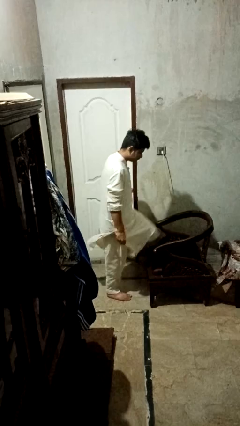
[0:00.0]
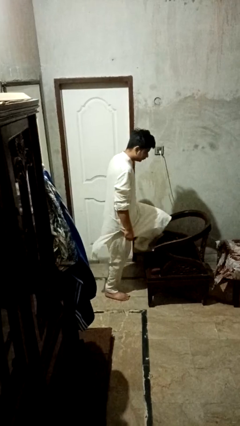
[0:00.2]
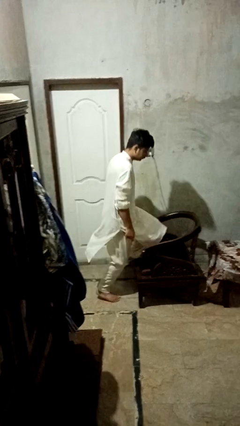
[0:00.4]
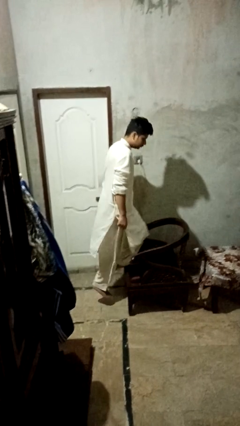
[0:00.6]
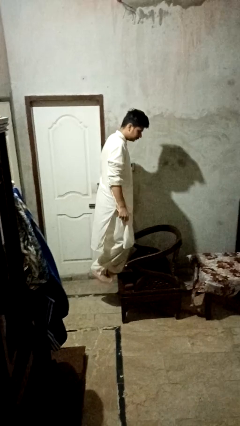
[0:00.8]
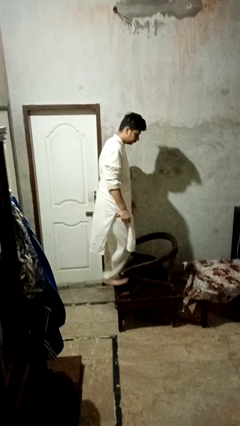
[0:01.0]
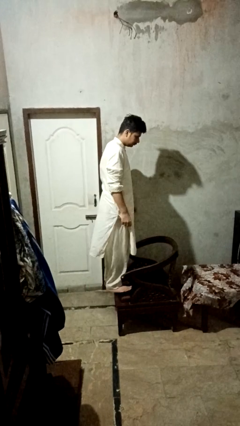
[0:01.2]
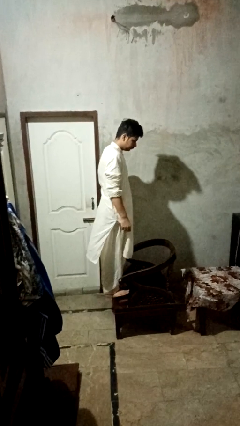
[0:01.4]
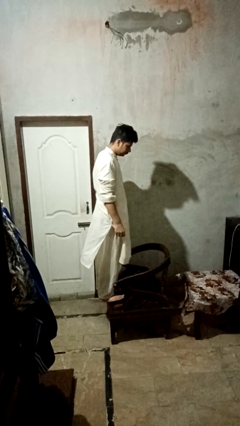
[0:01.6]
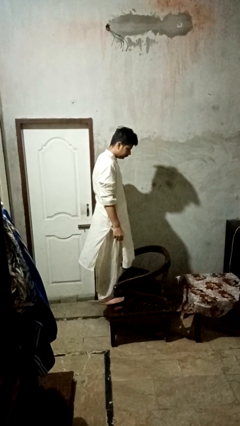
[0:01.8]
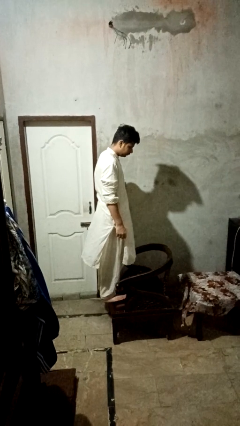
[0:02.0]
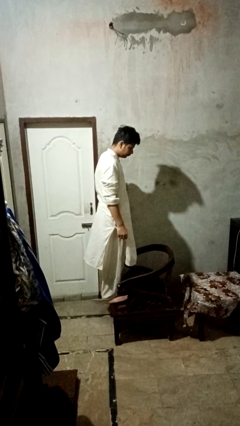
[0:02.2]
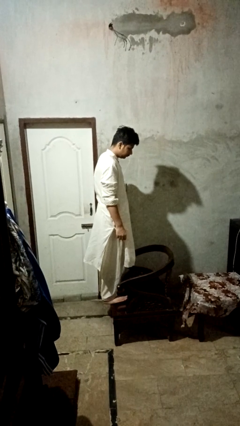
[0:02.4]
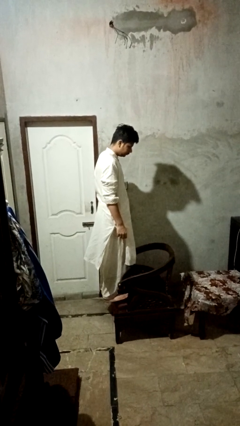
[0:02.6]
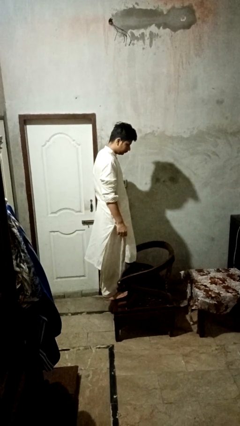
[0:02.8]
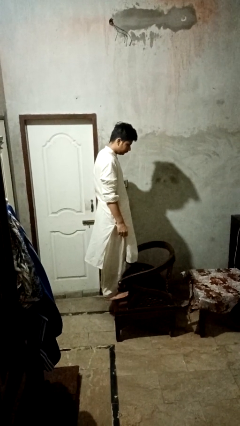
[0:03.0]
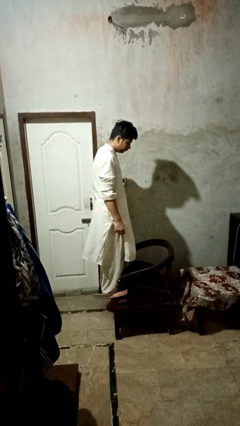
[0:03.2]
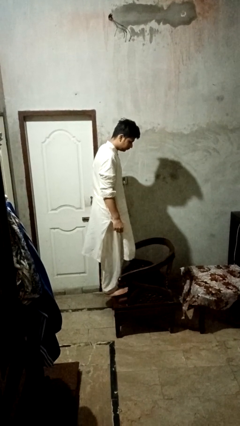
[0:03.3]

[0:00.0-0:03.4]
person climbs on couch

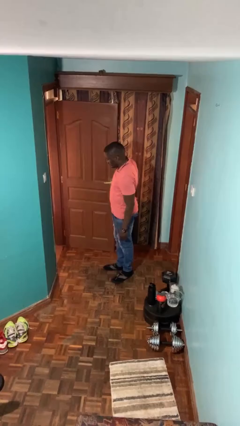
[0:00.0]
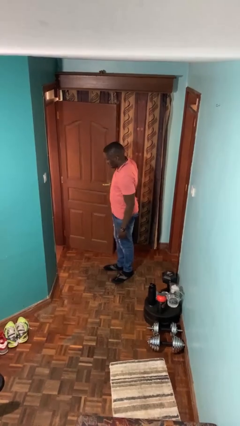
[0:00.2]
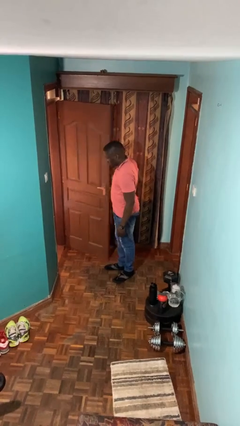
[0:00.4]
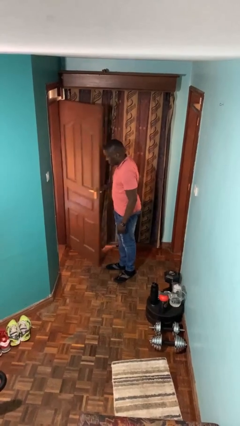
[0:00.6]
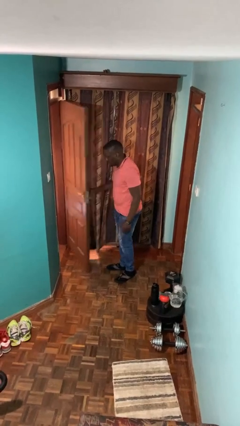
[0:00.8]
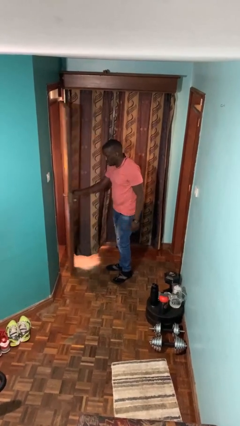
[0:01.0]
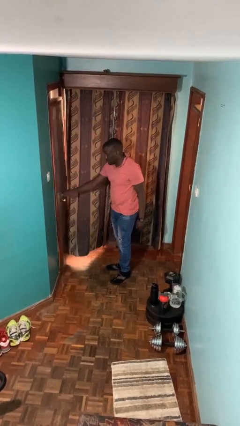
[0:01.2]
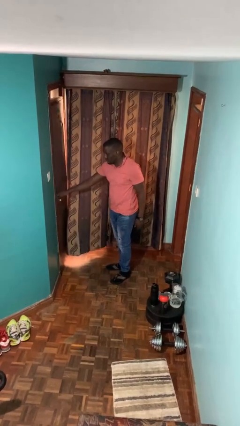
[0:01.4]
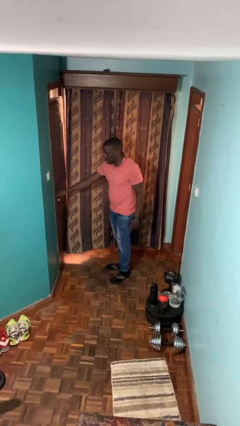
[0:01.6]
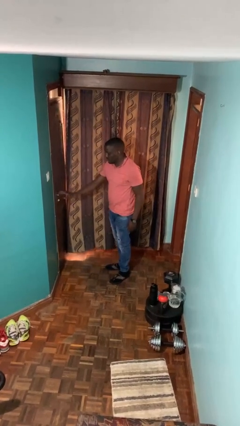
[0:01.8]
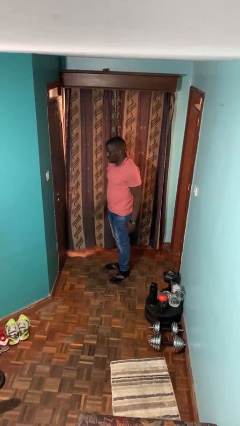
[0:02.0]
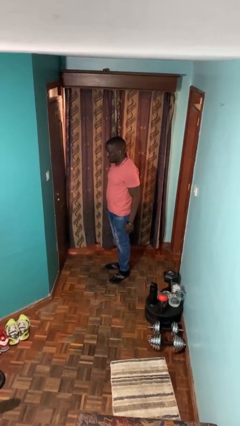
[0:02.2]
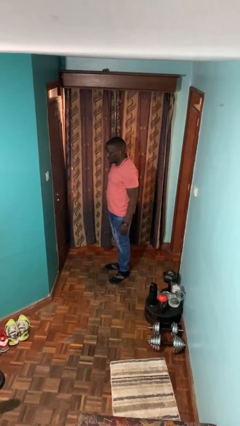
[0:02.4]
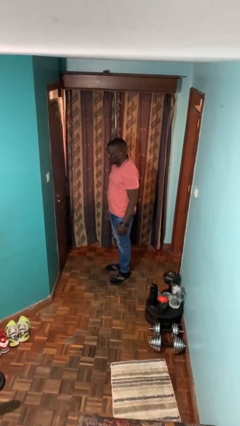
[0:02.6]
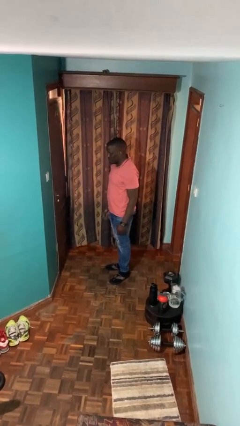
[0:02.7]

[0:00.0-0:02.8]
person closes facility door

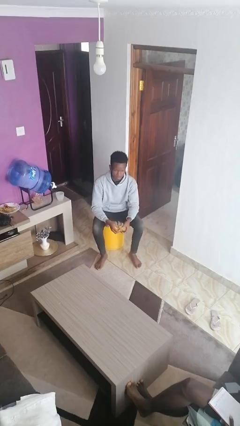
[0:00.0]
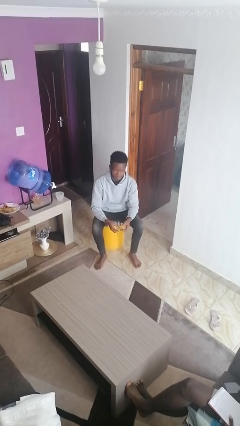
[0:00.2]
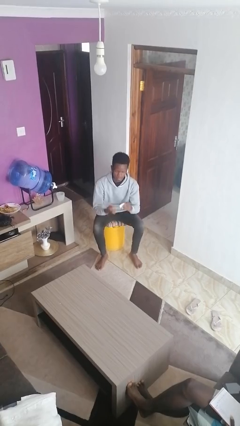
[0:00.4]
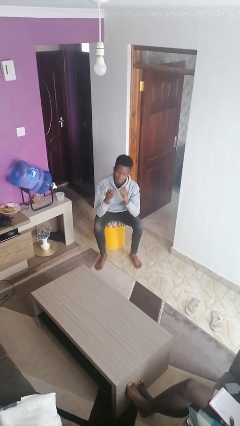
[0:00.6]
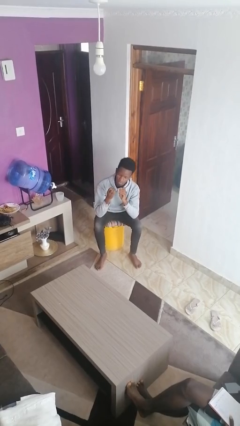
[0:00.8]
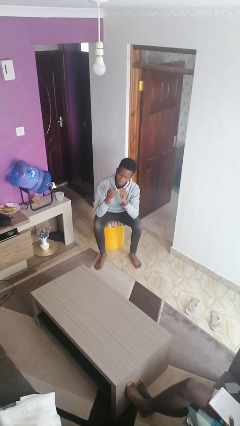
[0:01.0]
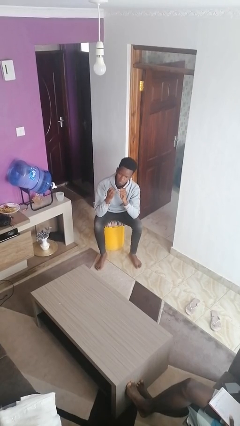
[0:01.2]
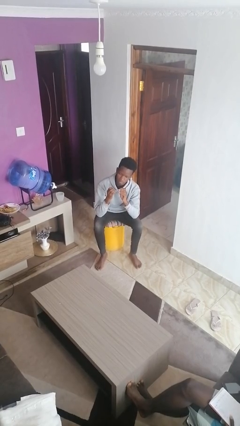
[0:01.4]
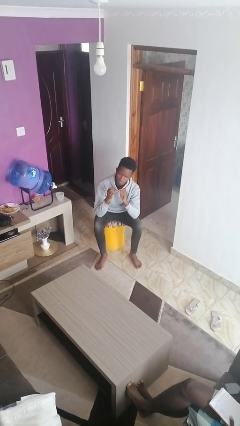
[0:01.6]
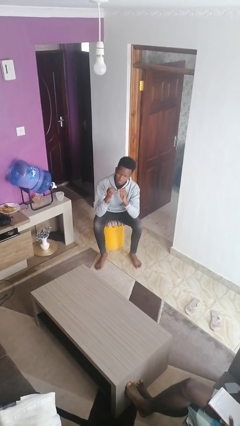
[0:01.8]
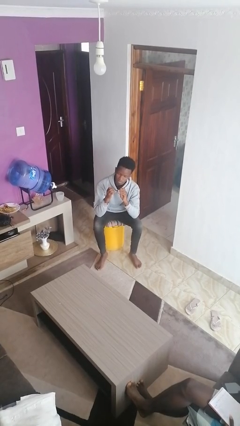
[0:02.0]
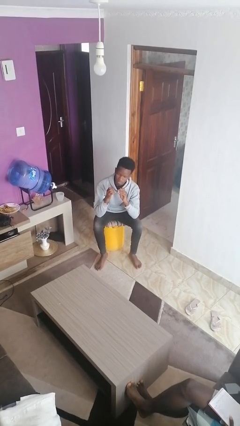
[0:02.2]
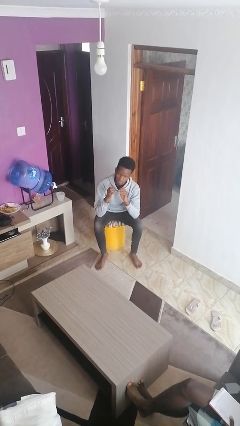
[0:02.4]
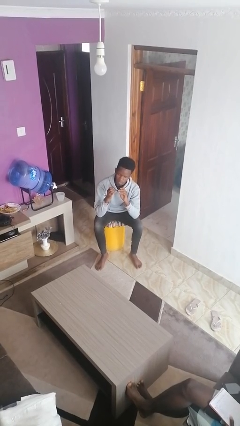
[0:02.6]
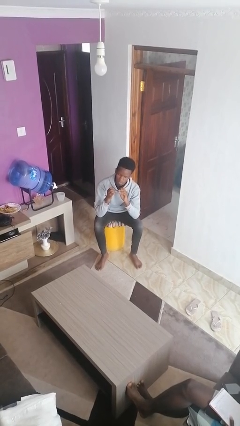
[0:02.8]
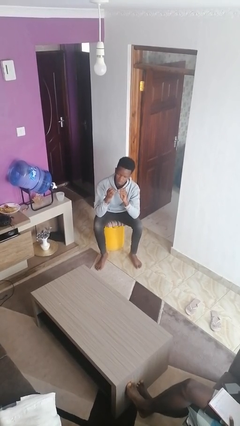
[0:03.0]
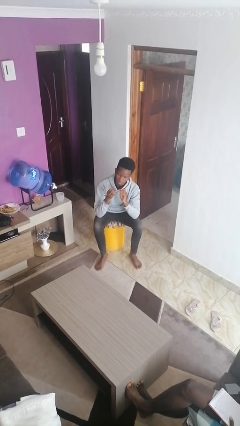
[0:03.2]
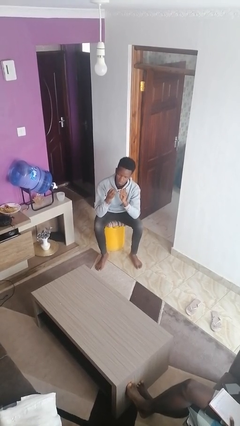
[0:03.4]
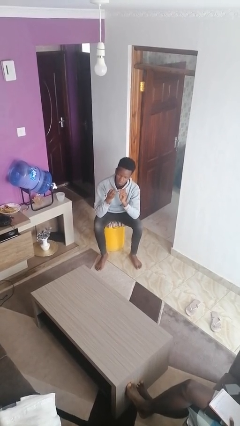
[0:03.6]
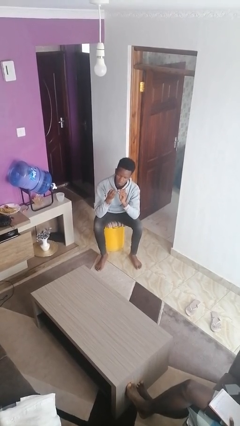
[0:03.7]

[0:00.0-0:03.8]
person clips fingernails

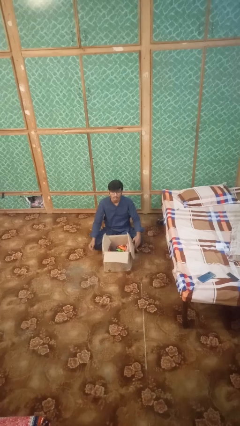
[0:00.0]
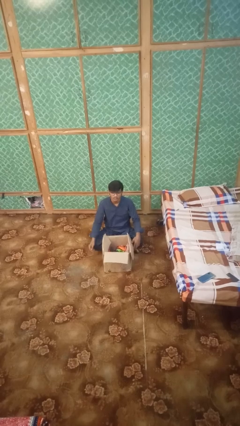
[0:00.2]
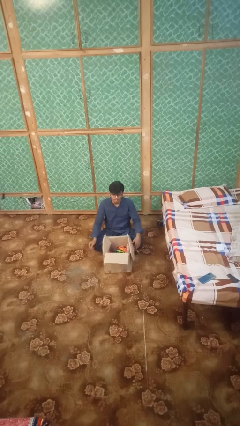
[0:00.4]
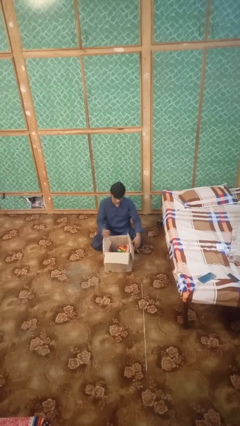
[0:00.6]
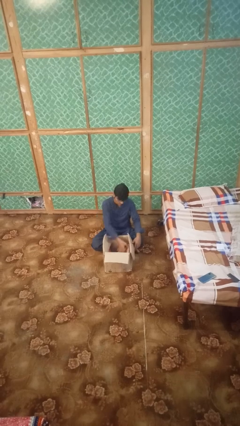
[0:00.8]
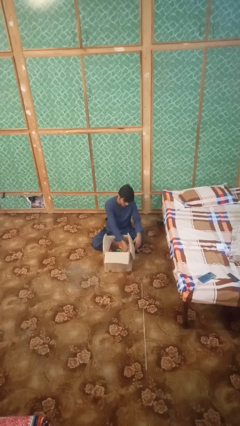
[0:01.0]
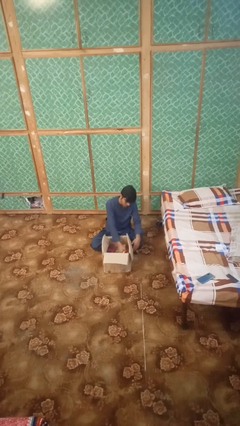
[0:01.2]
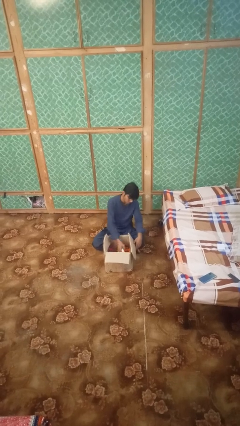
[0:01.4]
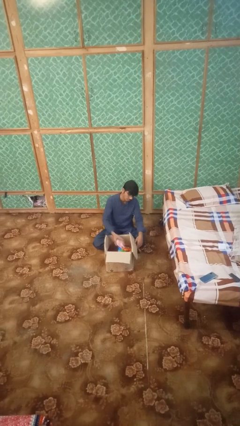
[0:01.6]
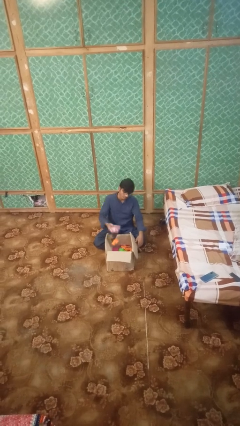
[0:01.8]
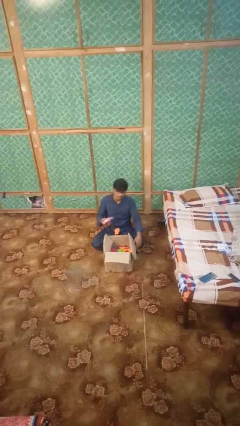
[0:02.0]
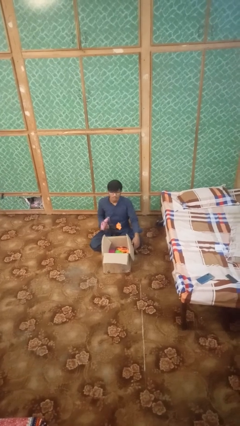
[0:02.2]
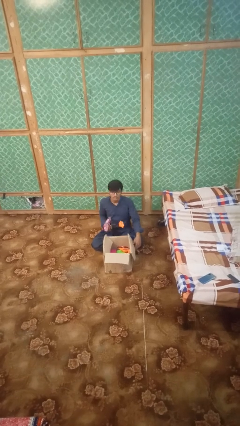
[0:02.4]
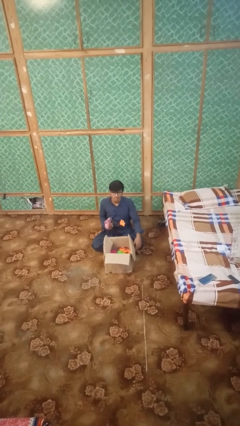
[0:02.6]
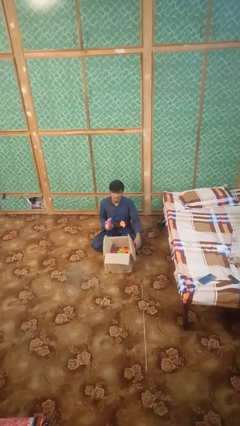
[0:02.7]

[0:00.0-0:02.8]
person takes object from box

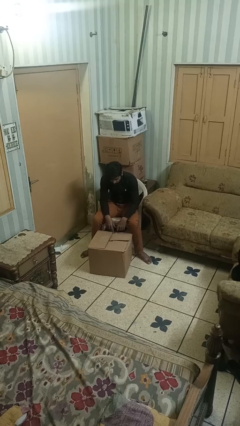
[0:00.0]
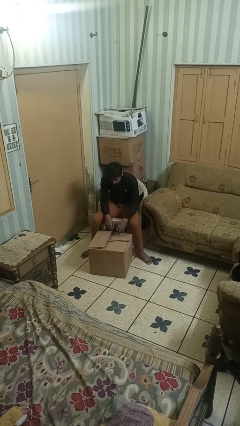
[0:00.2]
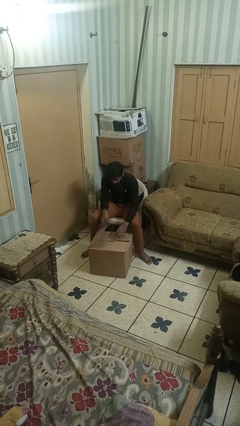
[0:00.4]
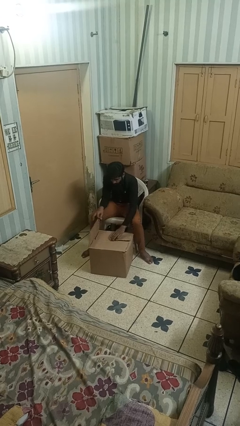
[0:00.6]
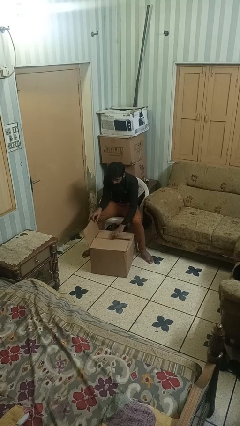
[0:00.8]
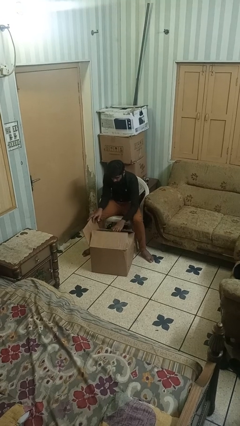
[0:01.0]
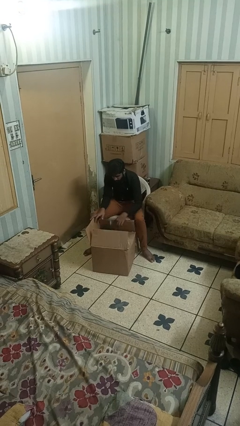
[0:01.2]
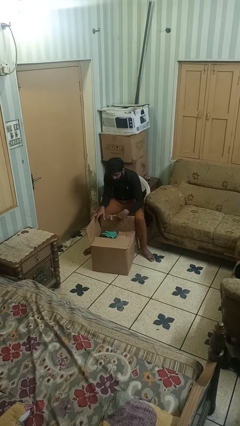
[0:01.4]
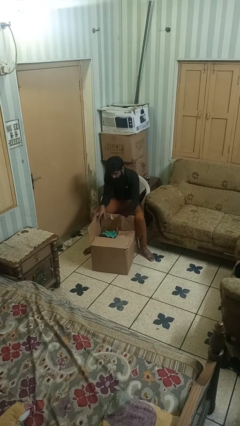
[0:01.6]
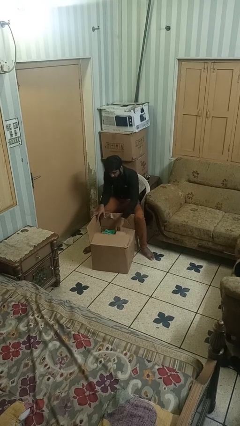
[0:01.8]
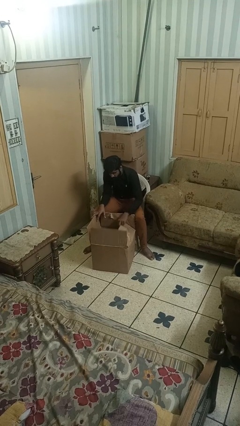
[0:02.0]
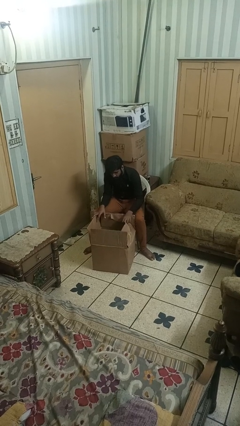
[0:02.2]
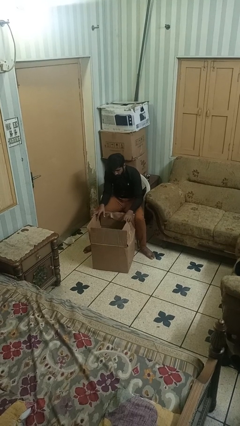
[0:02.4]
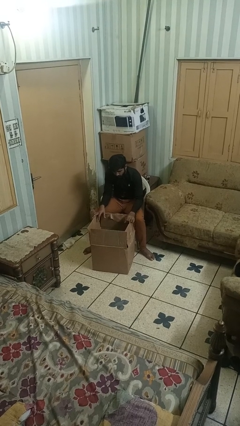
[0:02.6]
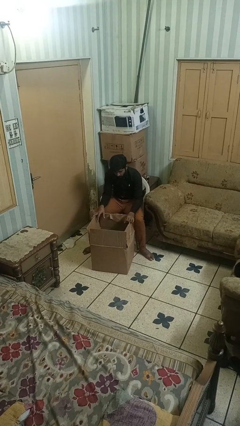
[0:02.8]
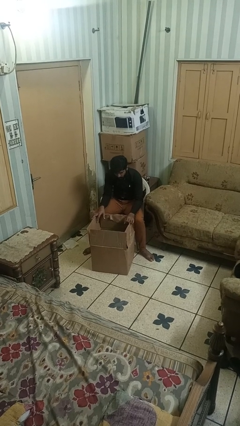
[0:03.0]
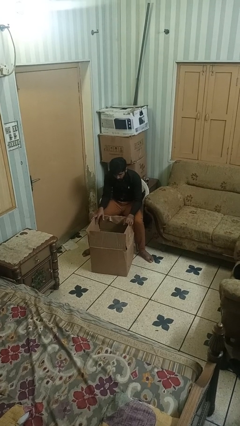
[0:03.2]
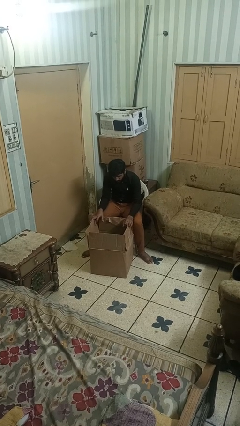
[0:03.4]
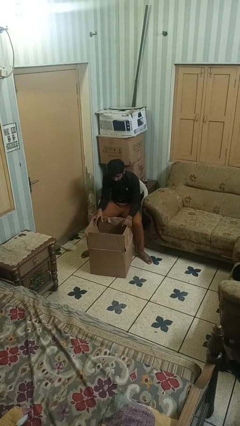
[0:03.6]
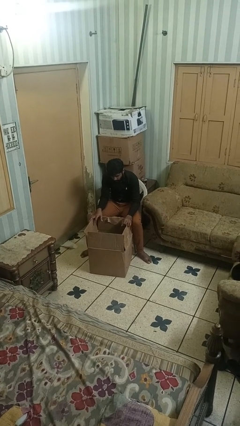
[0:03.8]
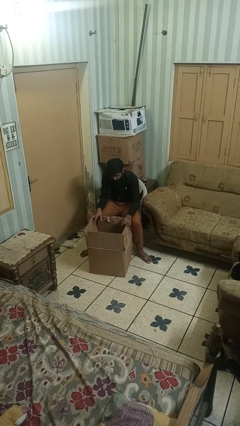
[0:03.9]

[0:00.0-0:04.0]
person opens box

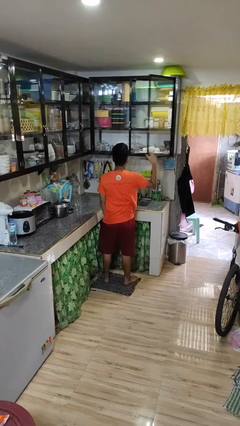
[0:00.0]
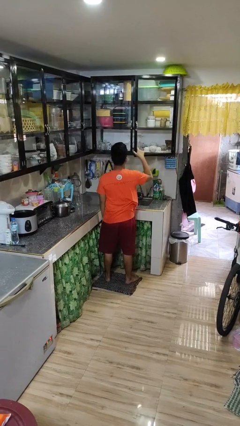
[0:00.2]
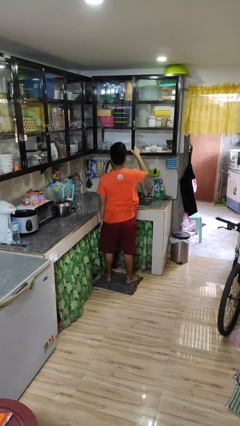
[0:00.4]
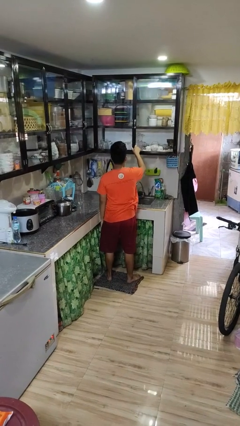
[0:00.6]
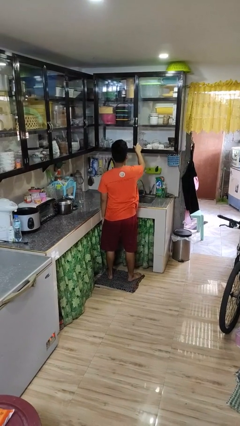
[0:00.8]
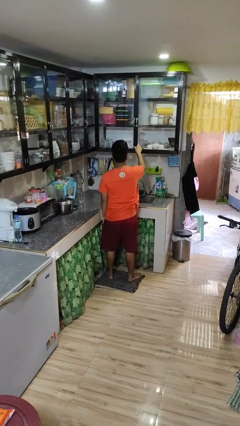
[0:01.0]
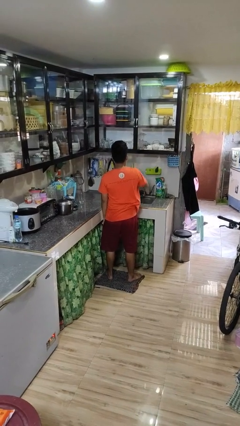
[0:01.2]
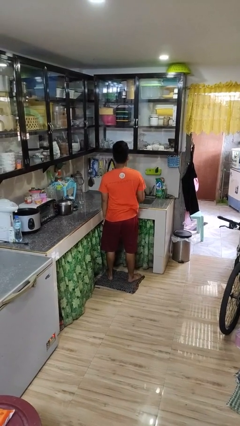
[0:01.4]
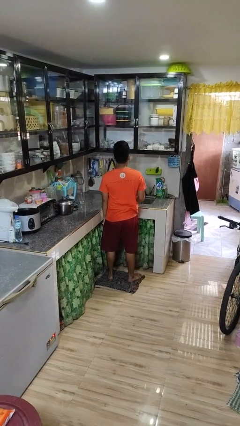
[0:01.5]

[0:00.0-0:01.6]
person closes cabinet
